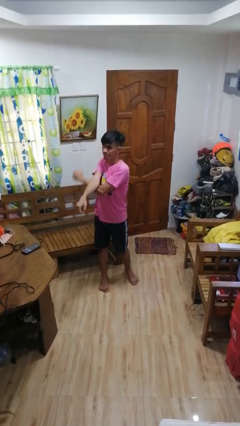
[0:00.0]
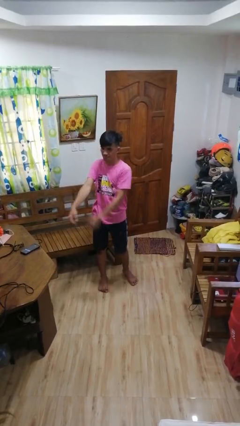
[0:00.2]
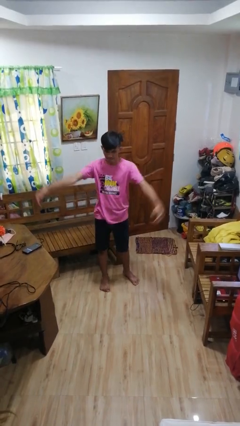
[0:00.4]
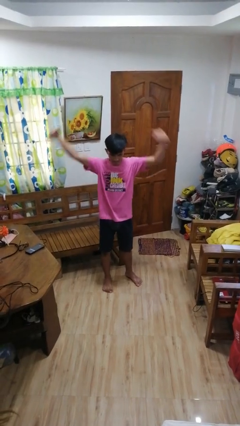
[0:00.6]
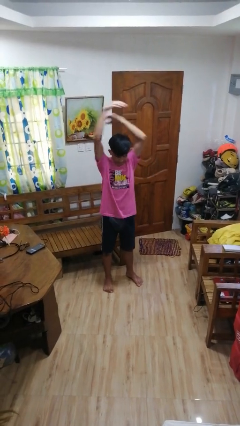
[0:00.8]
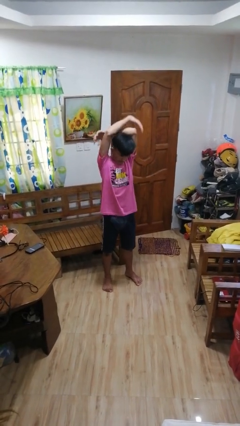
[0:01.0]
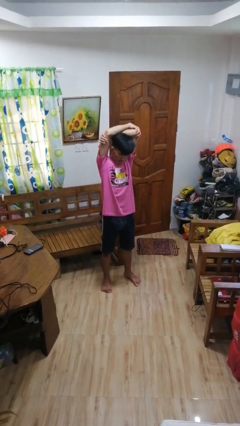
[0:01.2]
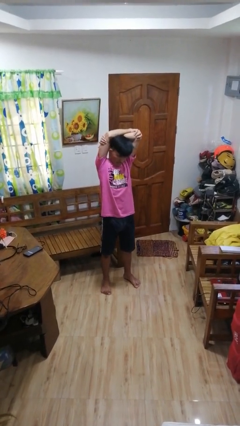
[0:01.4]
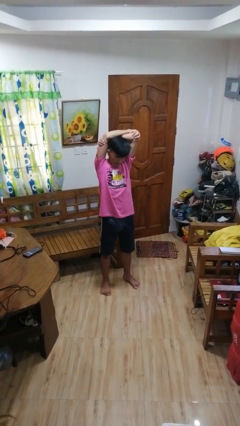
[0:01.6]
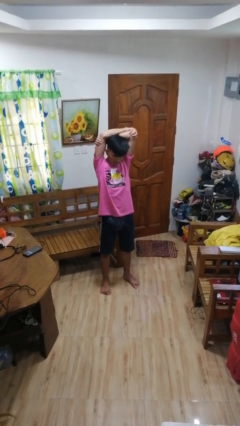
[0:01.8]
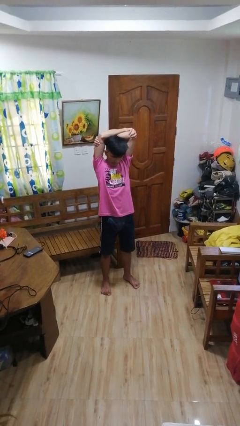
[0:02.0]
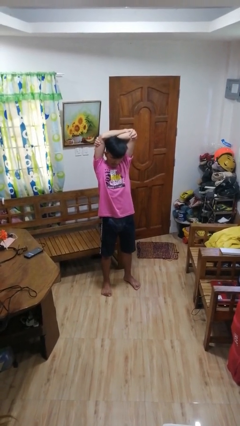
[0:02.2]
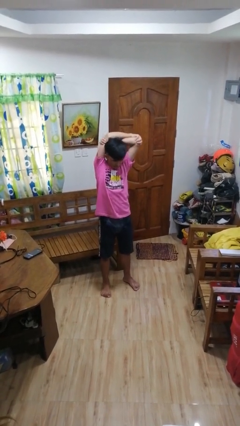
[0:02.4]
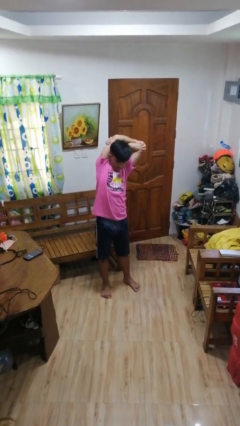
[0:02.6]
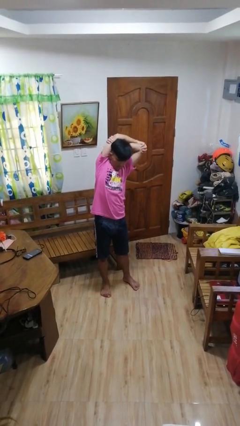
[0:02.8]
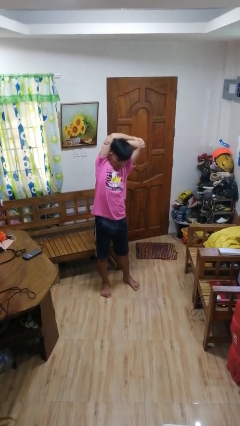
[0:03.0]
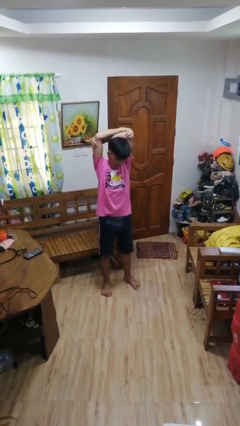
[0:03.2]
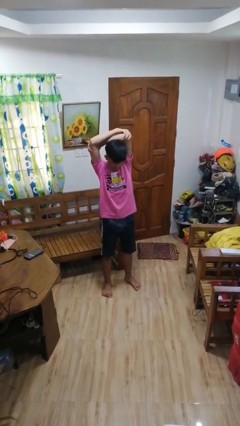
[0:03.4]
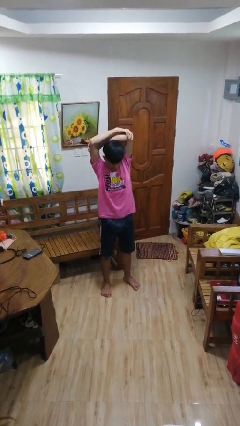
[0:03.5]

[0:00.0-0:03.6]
person stretches arms over head

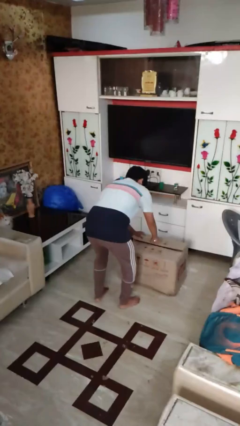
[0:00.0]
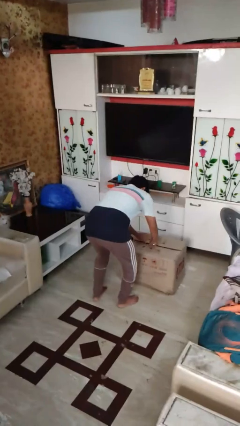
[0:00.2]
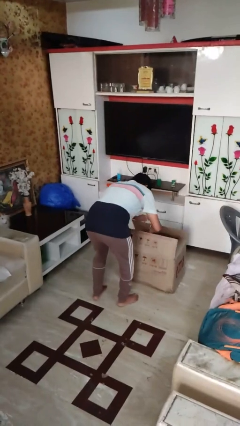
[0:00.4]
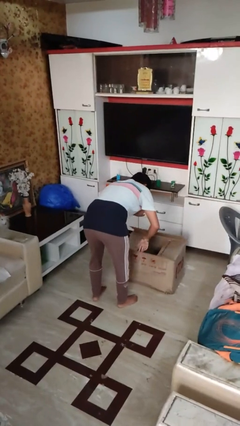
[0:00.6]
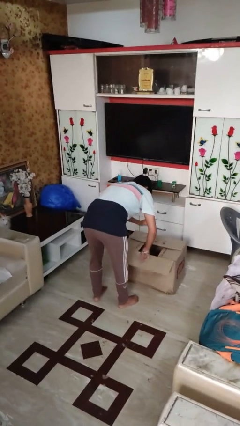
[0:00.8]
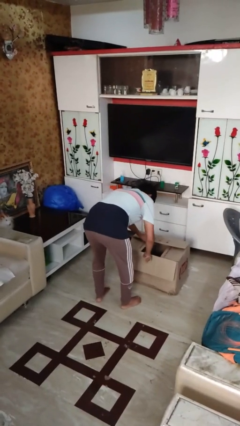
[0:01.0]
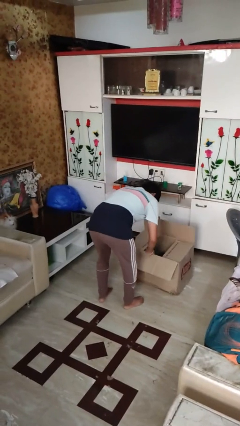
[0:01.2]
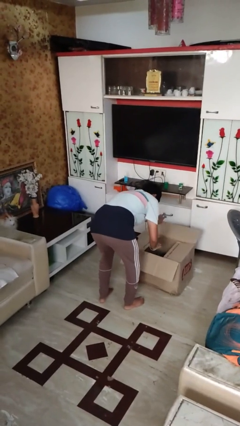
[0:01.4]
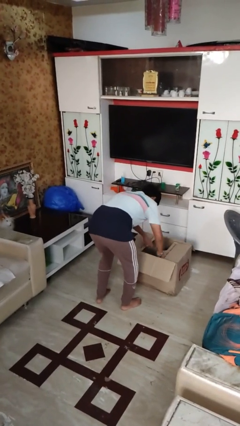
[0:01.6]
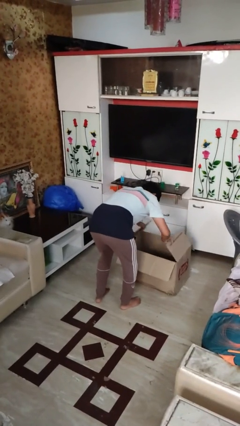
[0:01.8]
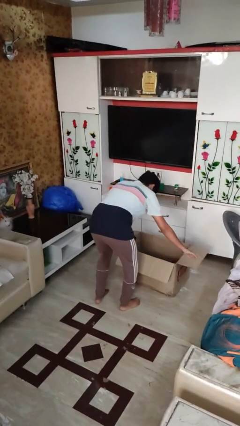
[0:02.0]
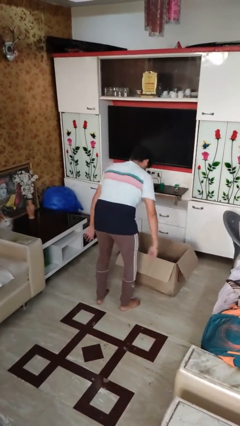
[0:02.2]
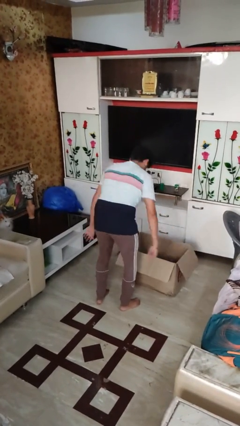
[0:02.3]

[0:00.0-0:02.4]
person opens box

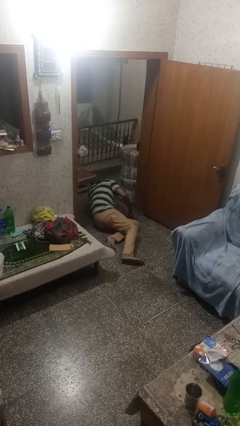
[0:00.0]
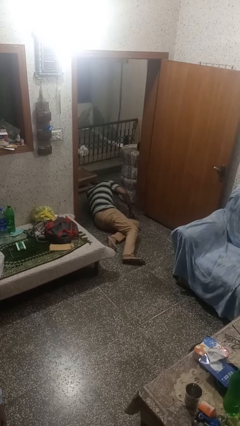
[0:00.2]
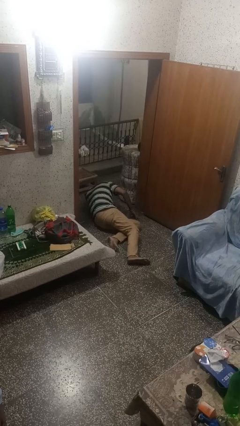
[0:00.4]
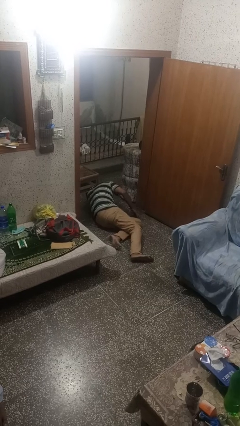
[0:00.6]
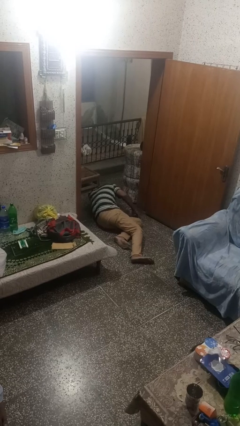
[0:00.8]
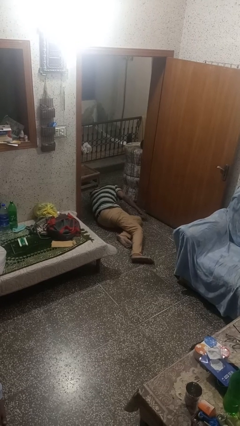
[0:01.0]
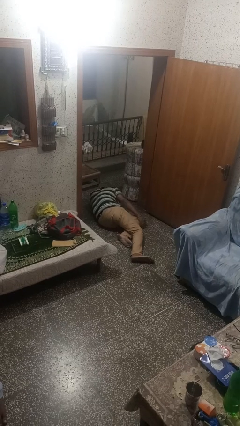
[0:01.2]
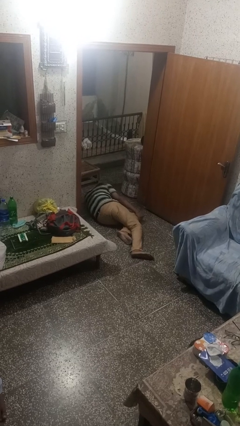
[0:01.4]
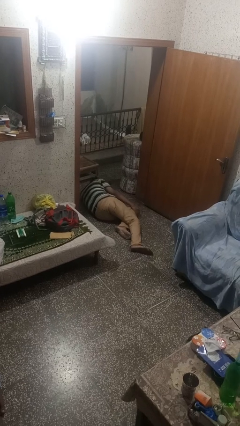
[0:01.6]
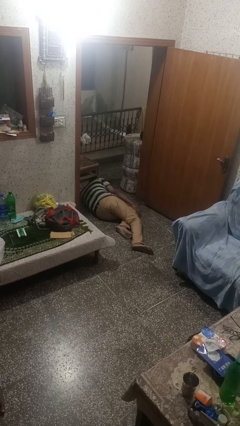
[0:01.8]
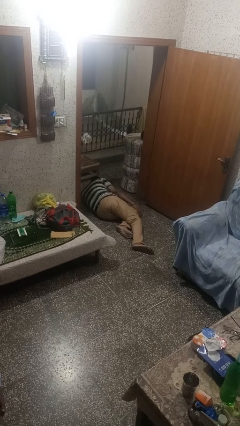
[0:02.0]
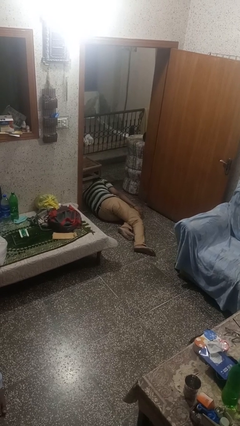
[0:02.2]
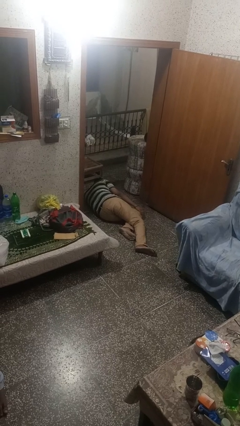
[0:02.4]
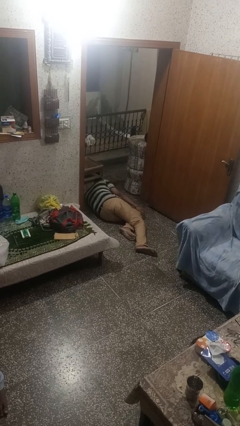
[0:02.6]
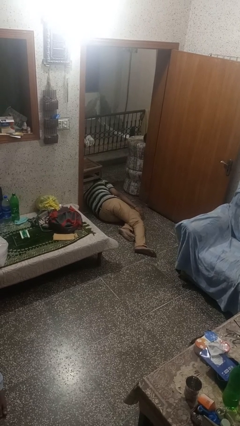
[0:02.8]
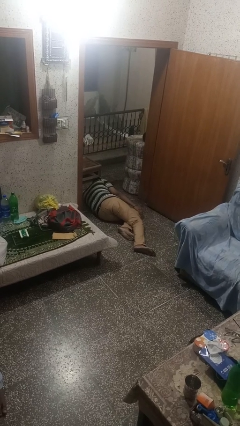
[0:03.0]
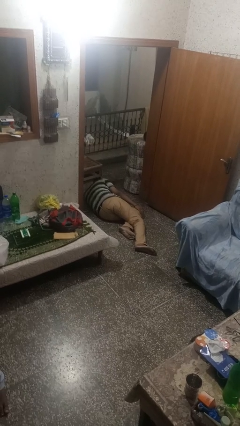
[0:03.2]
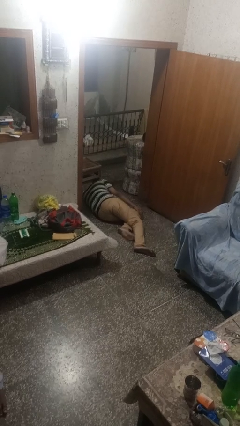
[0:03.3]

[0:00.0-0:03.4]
person lies down on floor

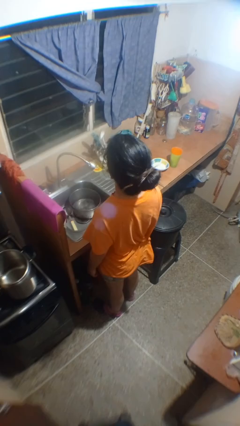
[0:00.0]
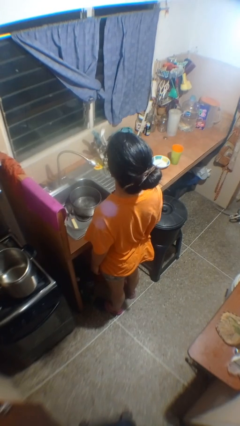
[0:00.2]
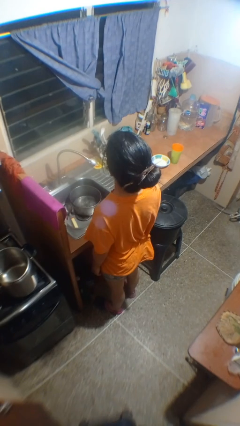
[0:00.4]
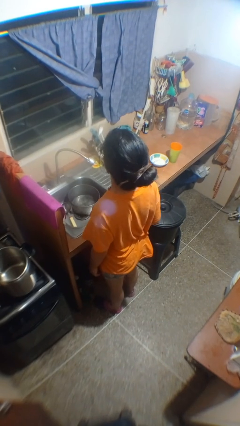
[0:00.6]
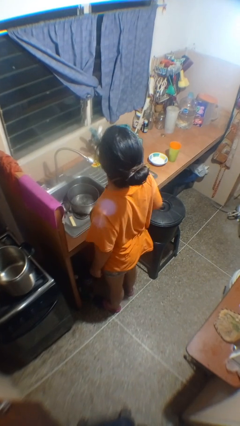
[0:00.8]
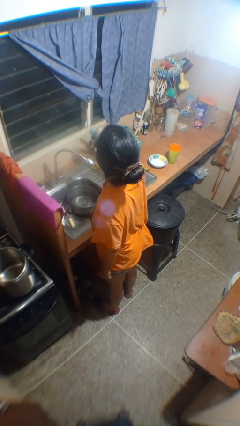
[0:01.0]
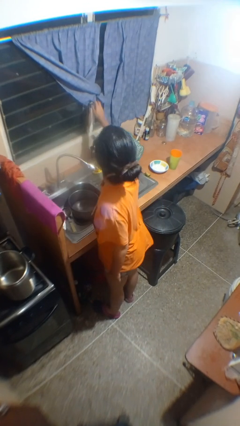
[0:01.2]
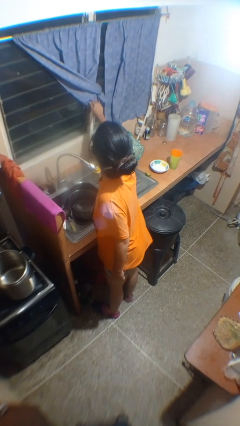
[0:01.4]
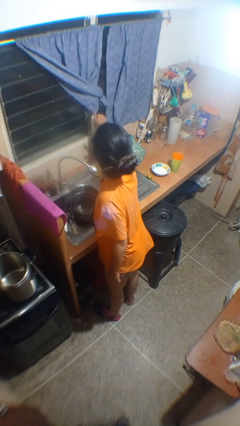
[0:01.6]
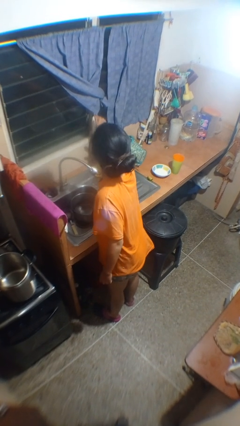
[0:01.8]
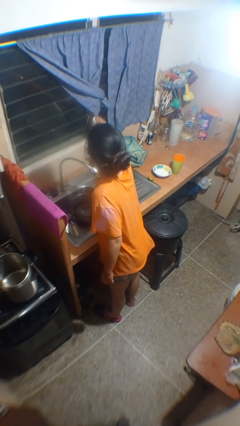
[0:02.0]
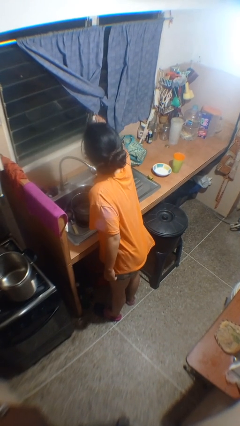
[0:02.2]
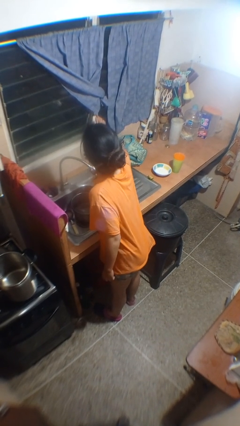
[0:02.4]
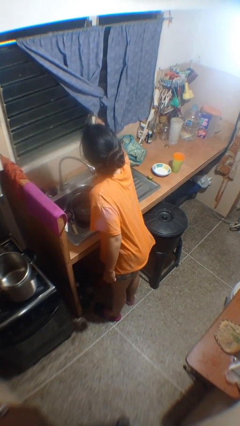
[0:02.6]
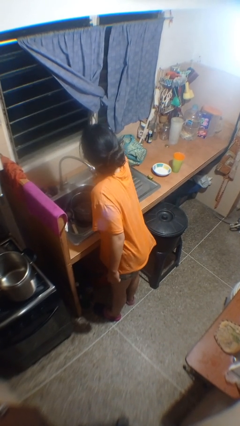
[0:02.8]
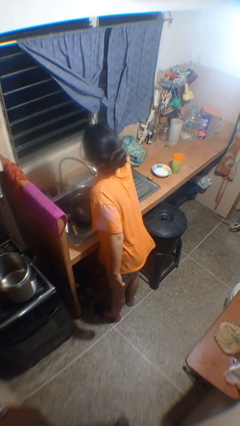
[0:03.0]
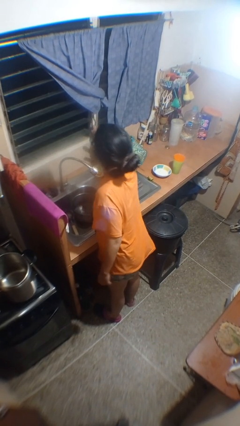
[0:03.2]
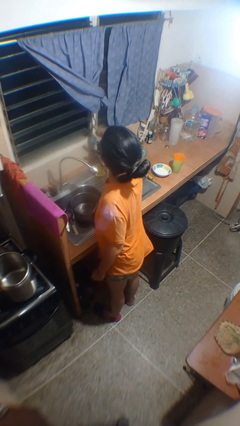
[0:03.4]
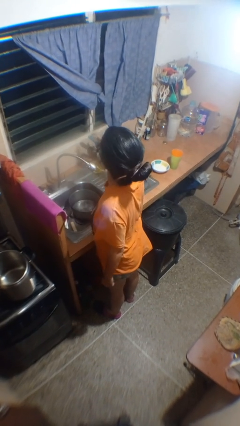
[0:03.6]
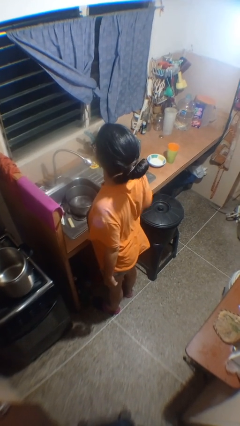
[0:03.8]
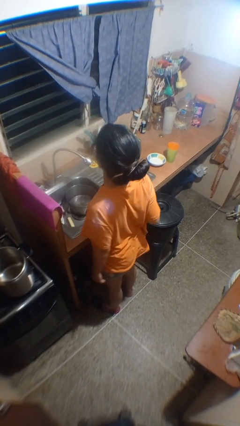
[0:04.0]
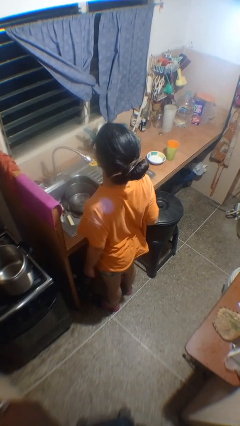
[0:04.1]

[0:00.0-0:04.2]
person opens home window

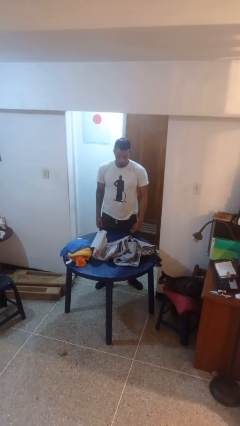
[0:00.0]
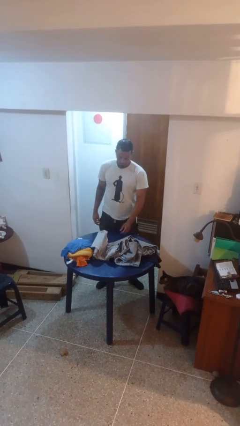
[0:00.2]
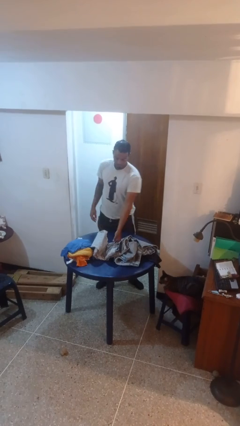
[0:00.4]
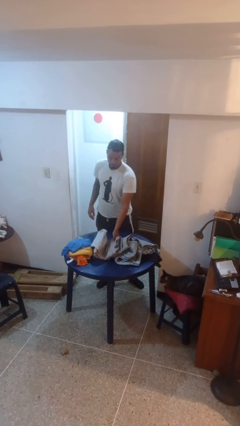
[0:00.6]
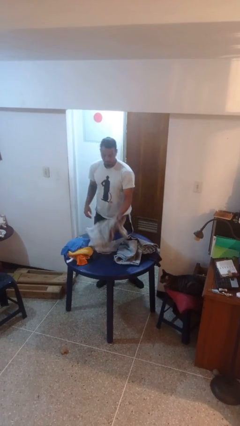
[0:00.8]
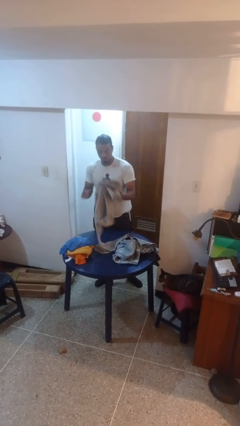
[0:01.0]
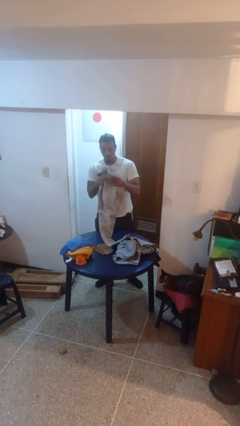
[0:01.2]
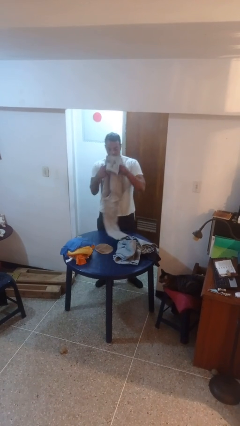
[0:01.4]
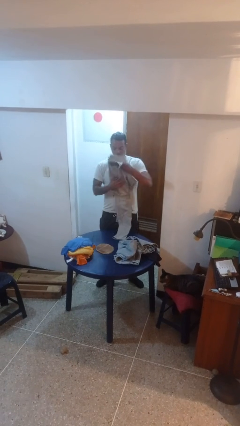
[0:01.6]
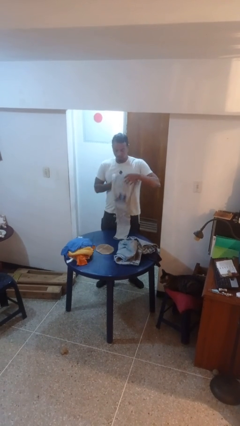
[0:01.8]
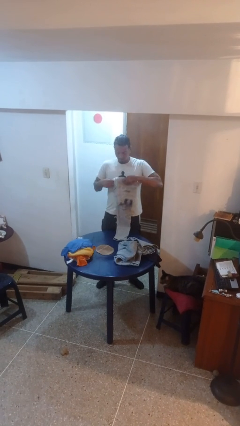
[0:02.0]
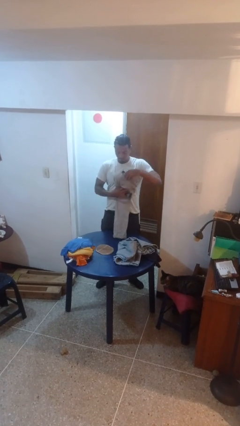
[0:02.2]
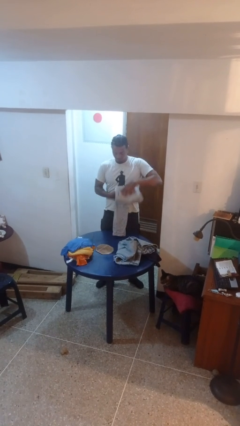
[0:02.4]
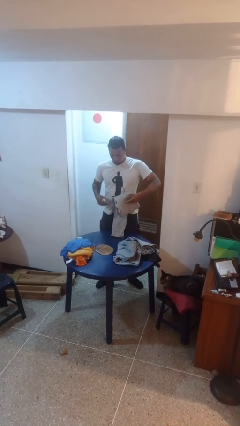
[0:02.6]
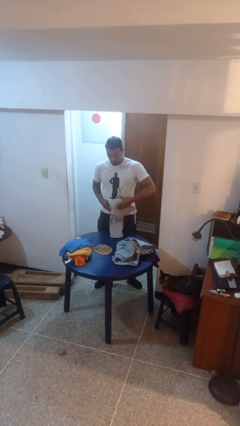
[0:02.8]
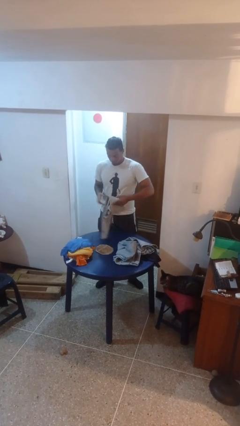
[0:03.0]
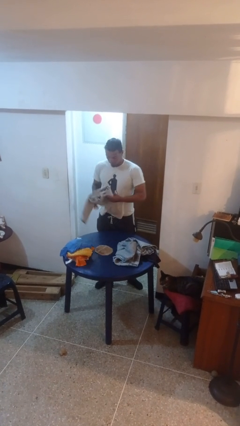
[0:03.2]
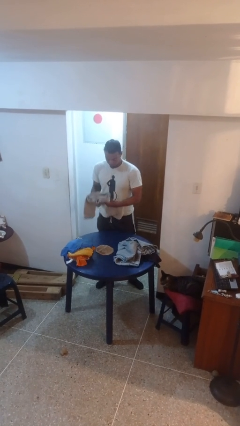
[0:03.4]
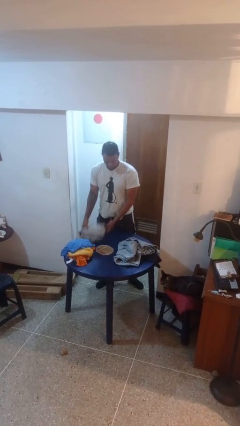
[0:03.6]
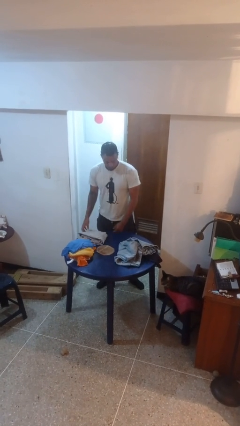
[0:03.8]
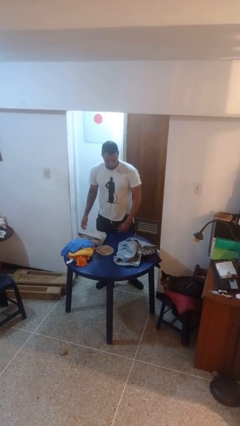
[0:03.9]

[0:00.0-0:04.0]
person folds pants
